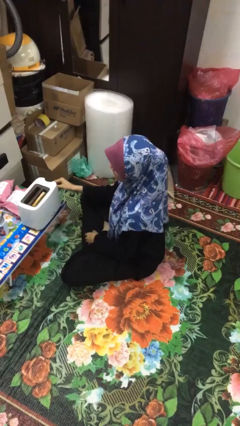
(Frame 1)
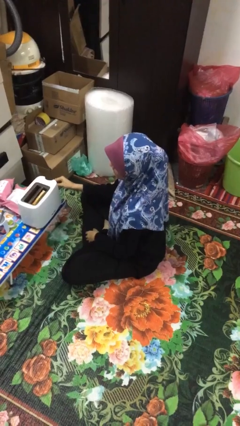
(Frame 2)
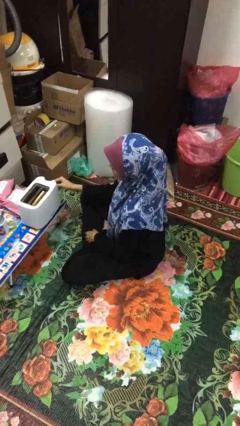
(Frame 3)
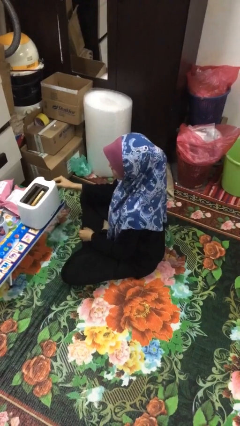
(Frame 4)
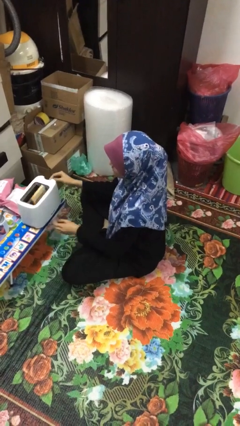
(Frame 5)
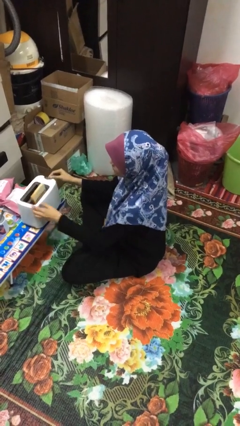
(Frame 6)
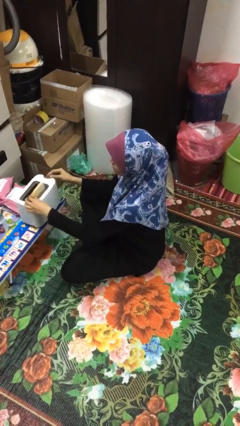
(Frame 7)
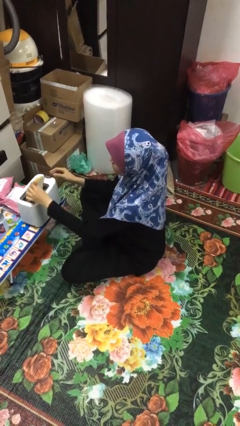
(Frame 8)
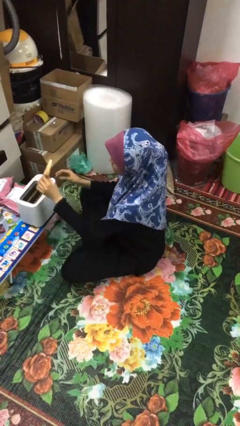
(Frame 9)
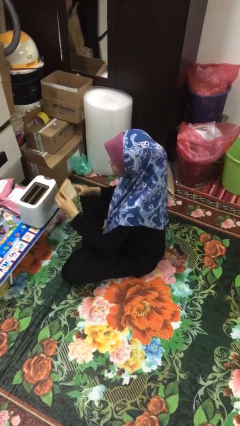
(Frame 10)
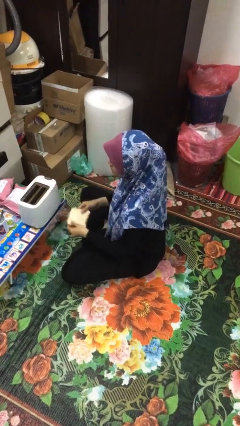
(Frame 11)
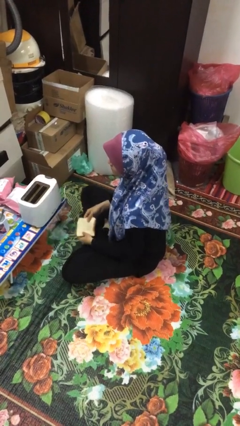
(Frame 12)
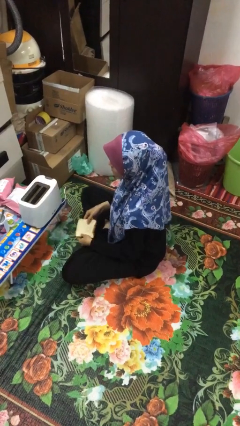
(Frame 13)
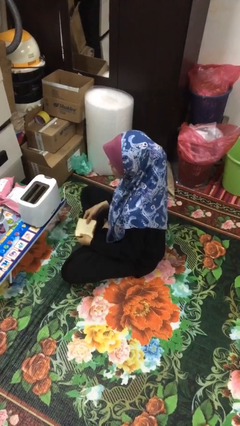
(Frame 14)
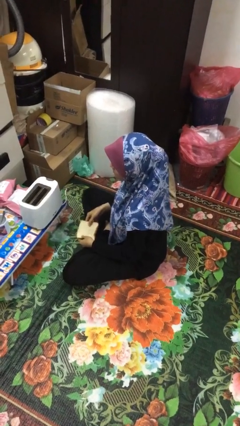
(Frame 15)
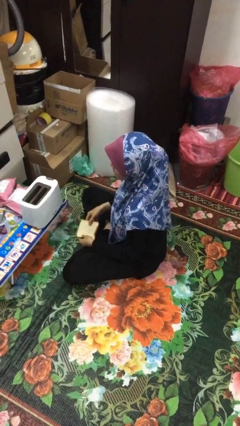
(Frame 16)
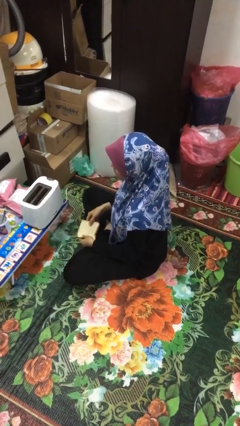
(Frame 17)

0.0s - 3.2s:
person takes object from toaster

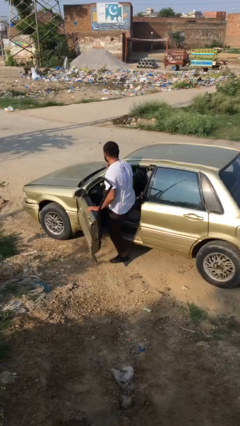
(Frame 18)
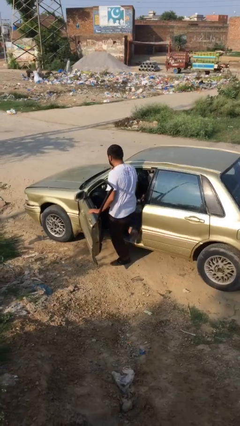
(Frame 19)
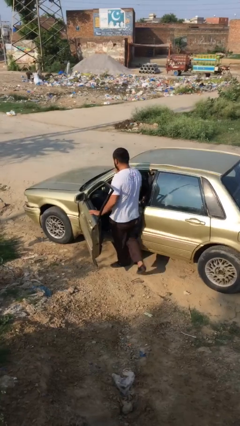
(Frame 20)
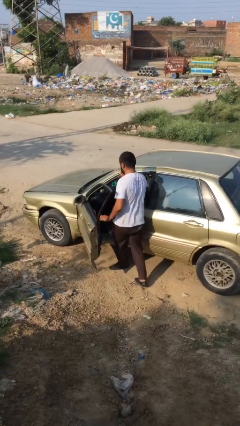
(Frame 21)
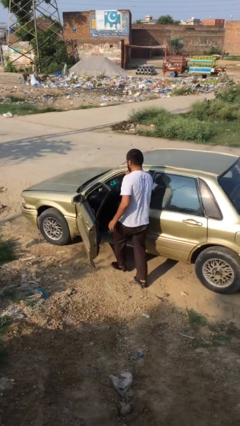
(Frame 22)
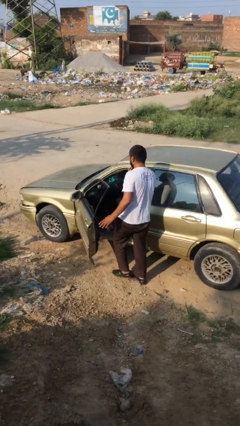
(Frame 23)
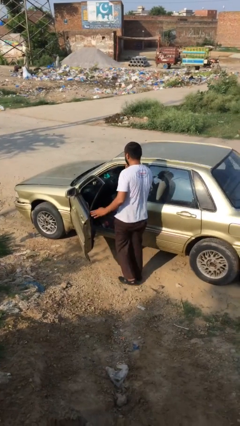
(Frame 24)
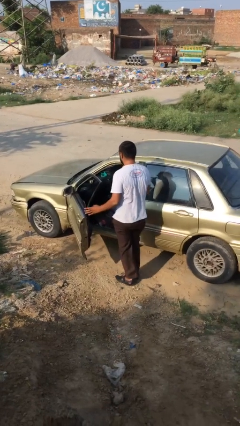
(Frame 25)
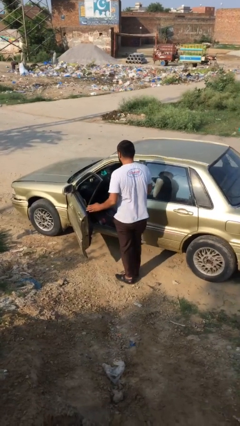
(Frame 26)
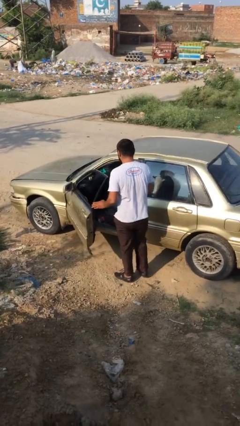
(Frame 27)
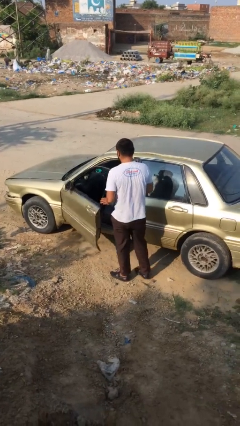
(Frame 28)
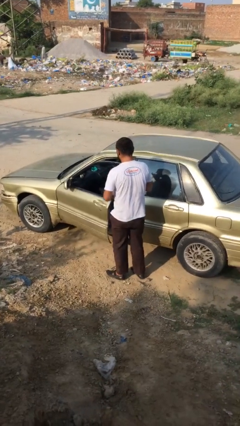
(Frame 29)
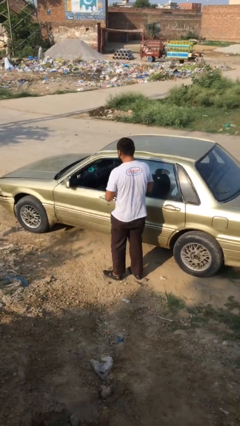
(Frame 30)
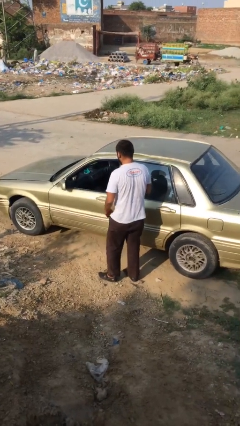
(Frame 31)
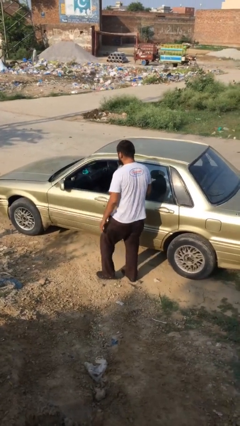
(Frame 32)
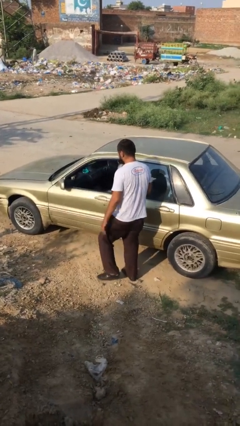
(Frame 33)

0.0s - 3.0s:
person closes car door

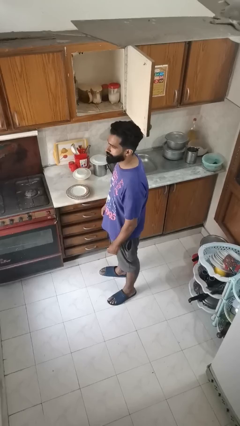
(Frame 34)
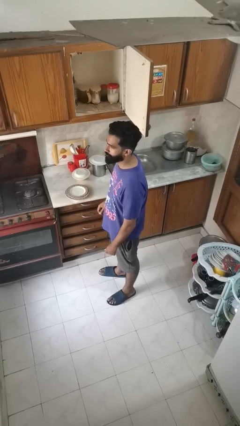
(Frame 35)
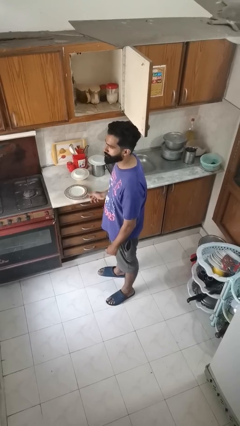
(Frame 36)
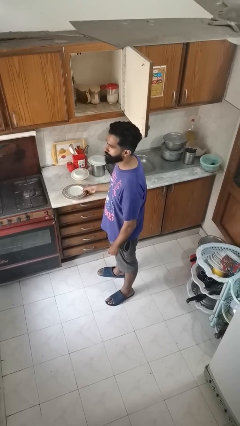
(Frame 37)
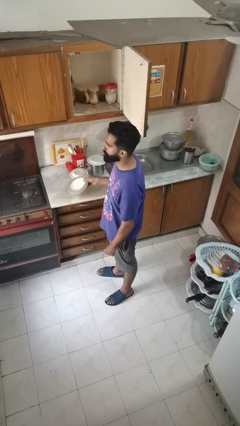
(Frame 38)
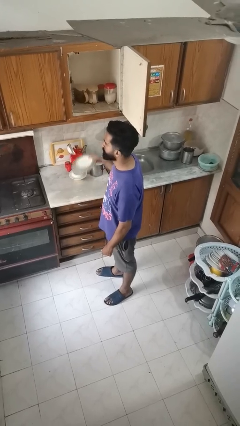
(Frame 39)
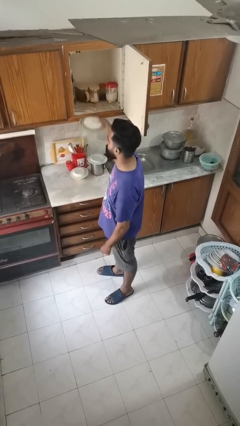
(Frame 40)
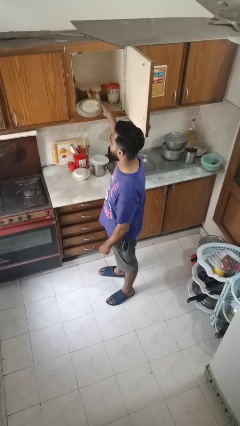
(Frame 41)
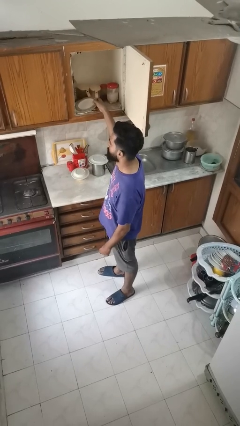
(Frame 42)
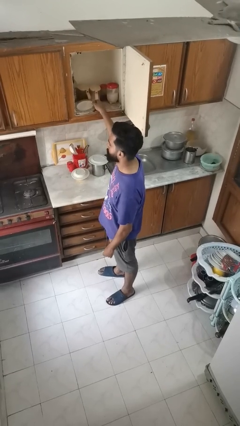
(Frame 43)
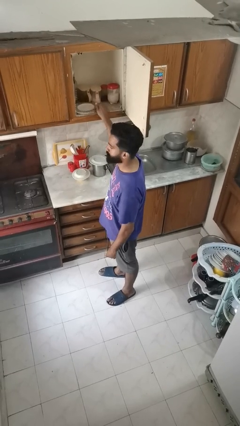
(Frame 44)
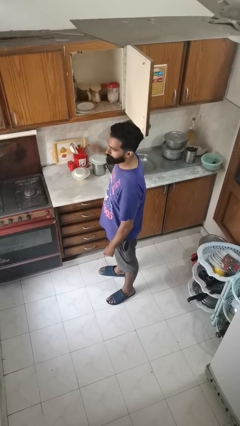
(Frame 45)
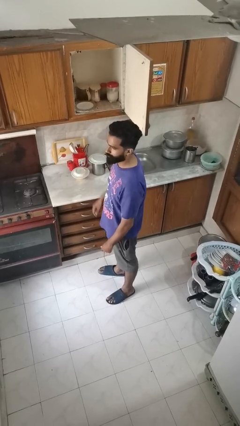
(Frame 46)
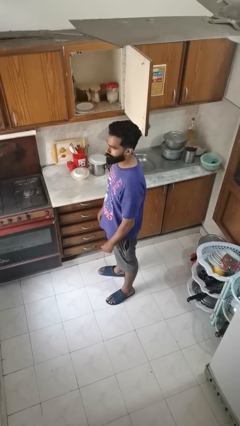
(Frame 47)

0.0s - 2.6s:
person puts object in cabinet

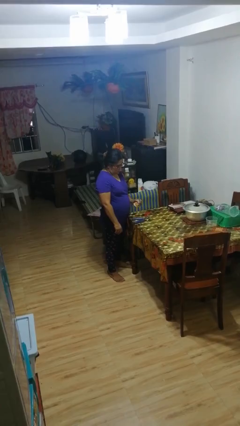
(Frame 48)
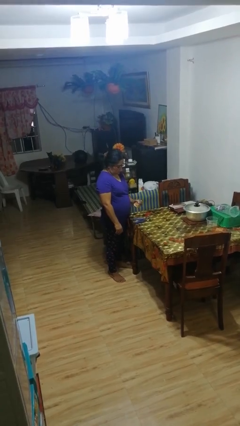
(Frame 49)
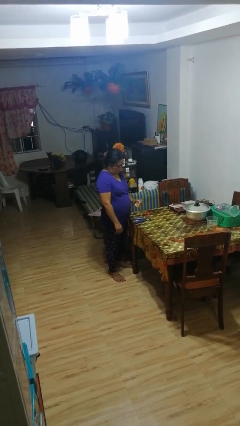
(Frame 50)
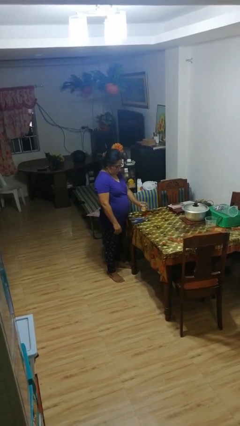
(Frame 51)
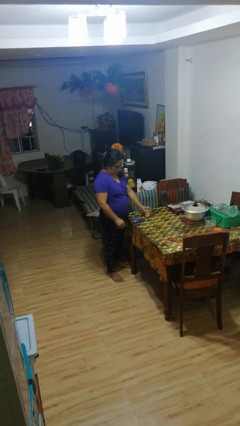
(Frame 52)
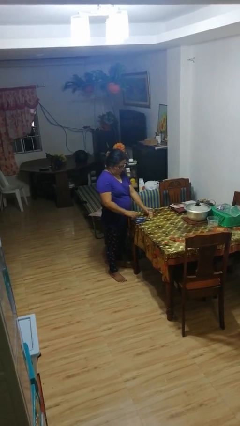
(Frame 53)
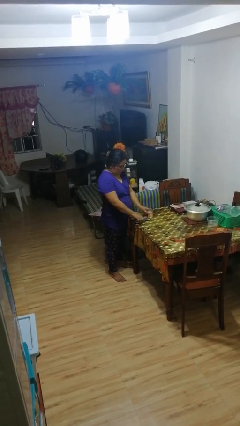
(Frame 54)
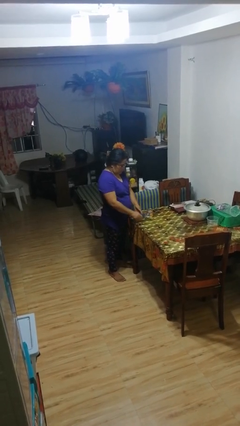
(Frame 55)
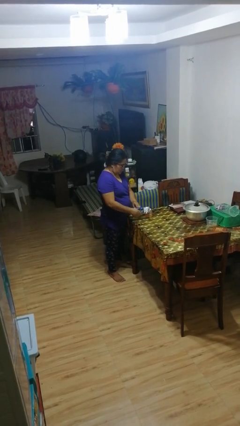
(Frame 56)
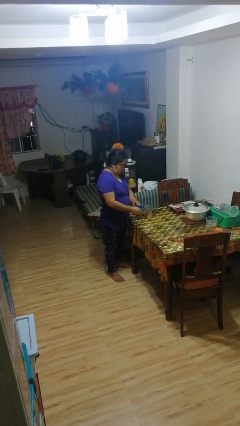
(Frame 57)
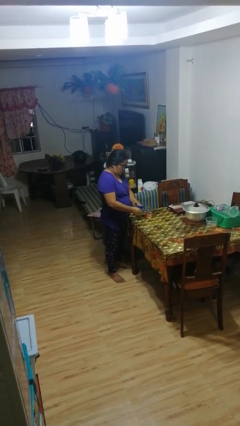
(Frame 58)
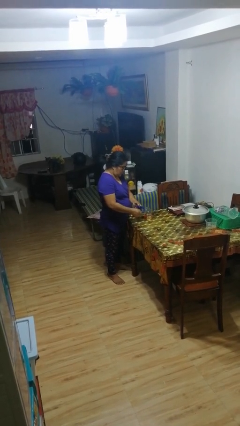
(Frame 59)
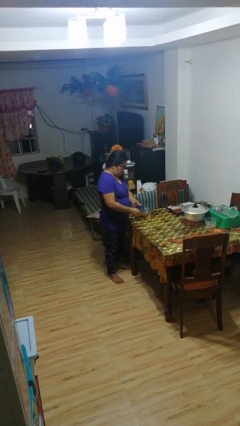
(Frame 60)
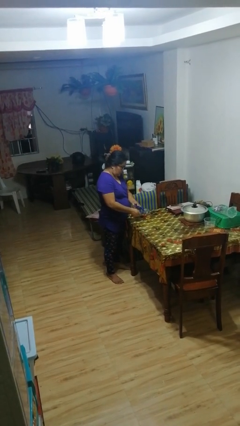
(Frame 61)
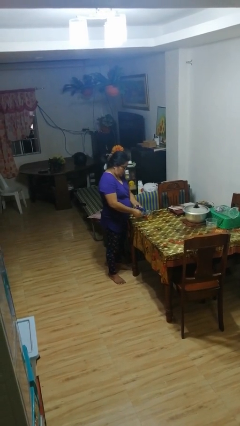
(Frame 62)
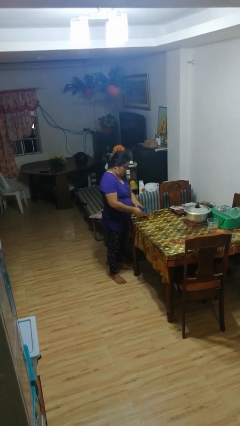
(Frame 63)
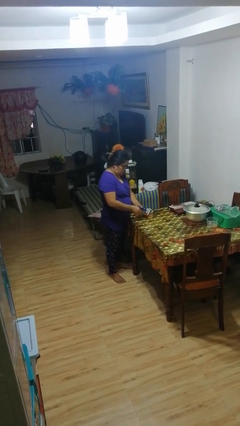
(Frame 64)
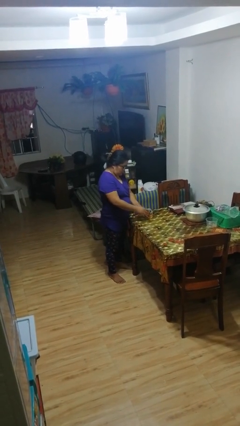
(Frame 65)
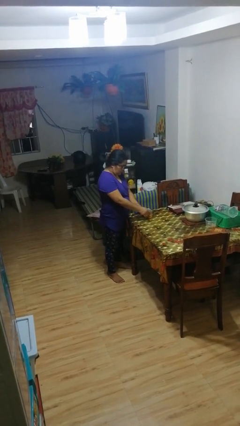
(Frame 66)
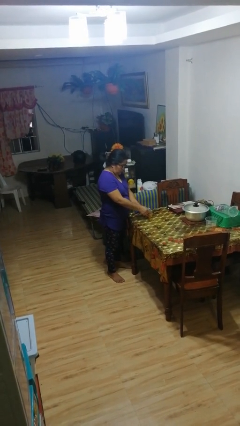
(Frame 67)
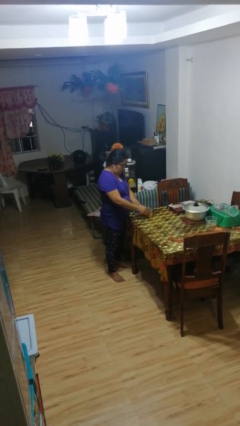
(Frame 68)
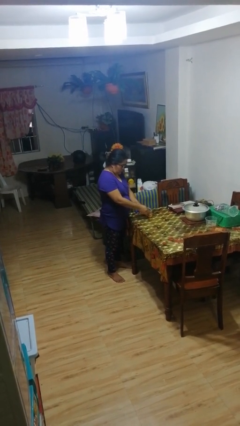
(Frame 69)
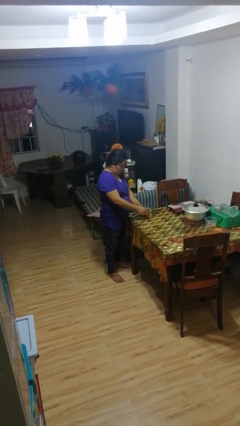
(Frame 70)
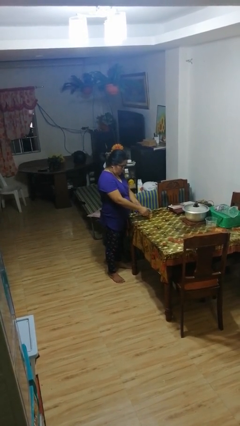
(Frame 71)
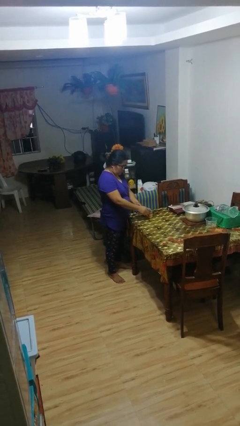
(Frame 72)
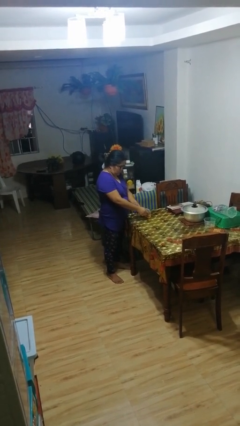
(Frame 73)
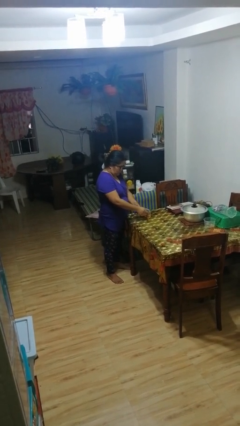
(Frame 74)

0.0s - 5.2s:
person opens can with can opener

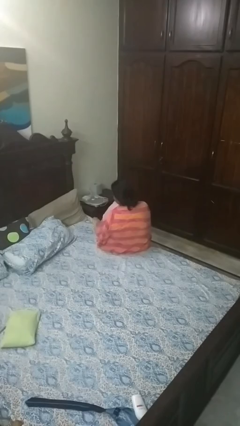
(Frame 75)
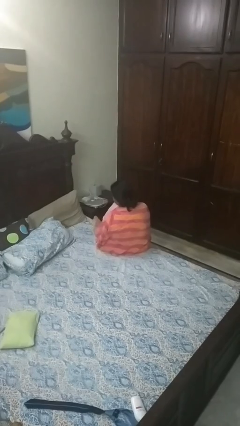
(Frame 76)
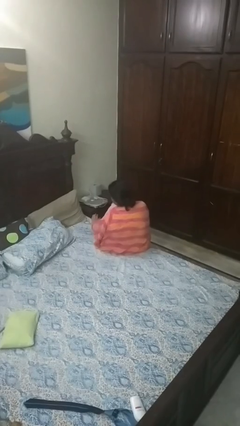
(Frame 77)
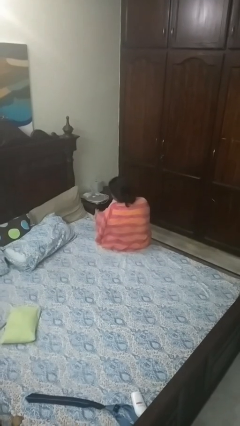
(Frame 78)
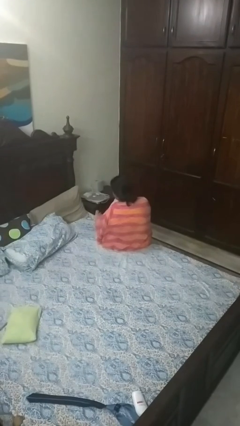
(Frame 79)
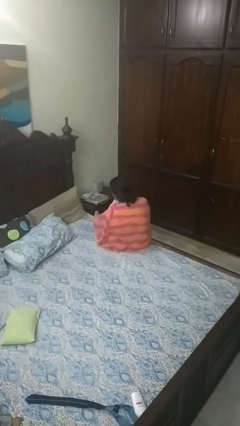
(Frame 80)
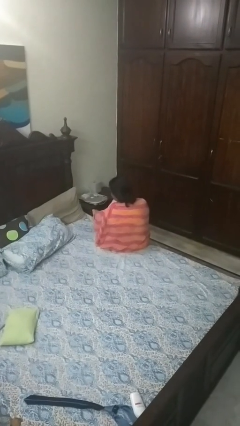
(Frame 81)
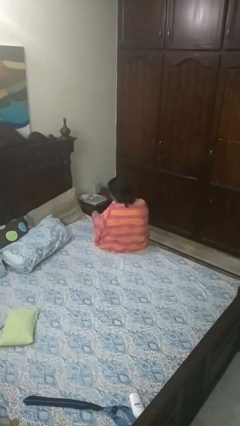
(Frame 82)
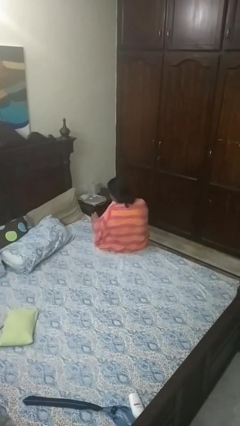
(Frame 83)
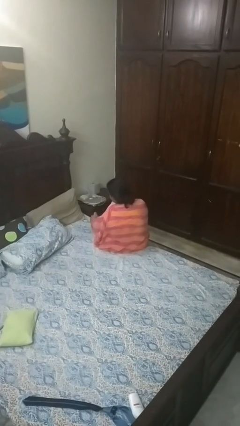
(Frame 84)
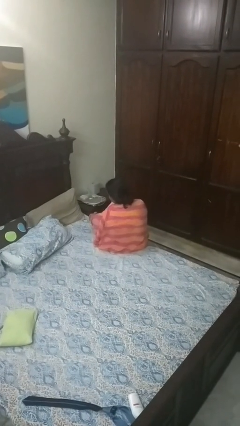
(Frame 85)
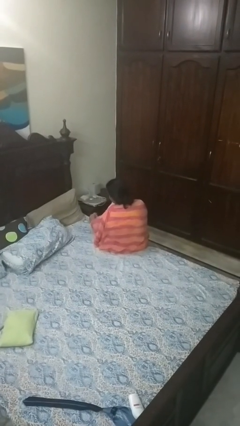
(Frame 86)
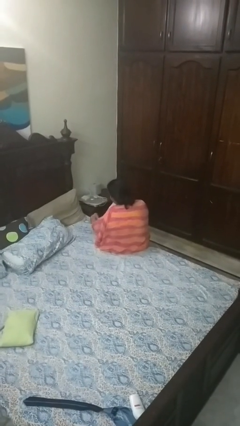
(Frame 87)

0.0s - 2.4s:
person rubs foot

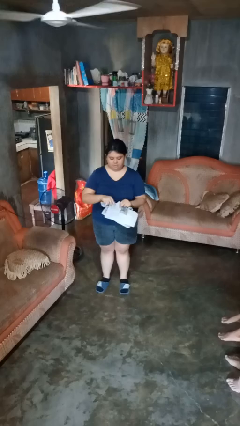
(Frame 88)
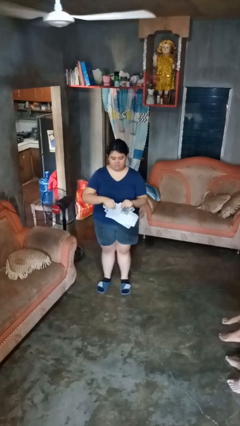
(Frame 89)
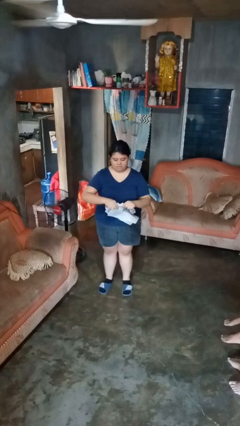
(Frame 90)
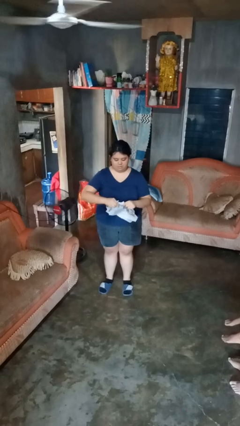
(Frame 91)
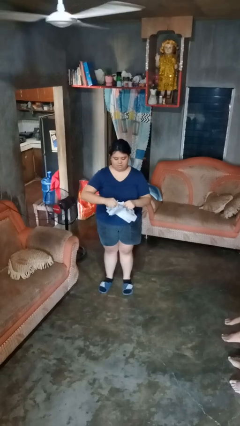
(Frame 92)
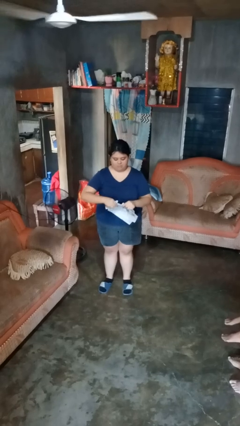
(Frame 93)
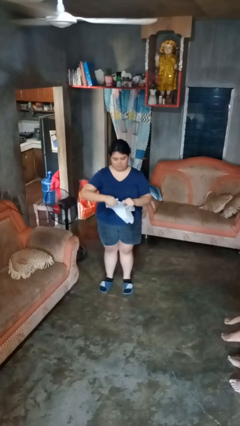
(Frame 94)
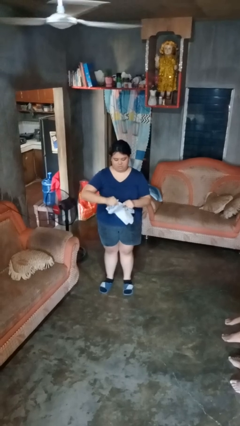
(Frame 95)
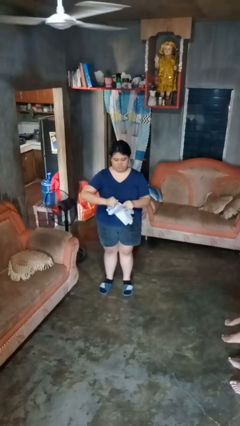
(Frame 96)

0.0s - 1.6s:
person tears paper
